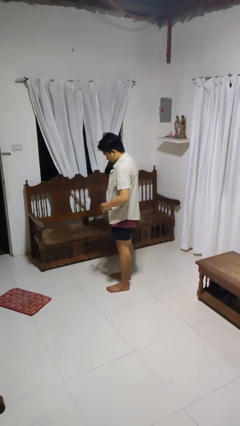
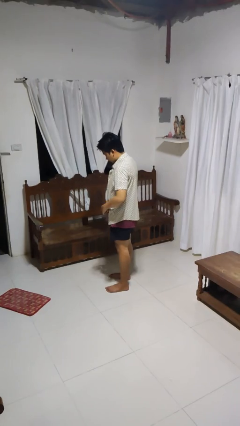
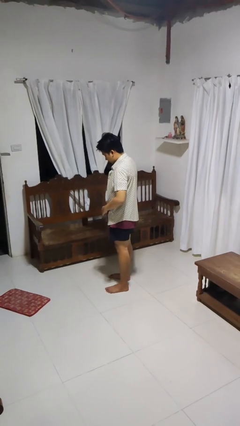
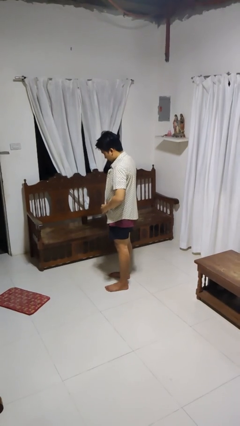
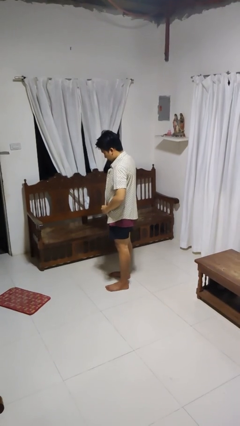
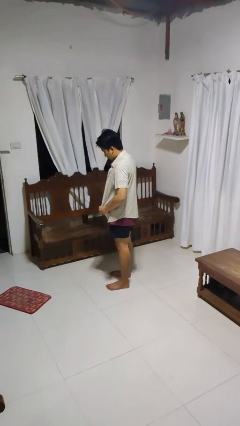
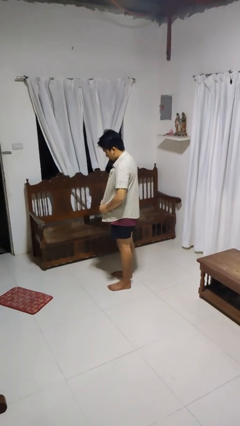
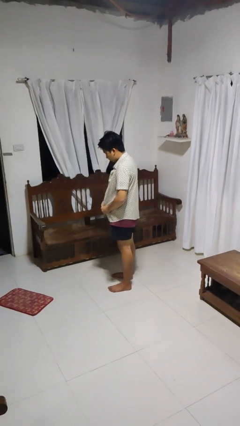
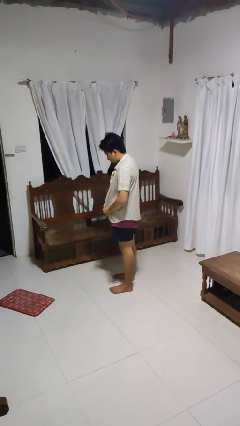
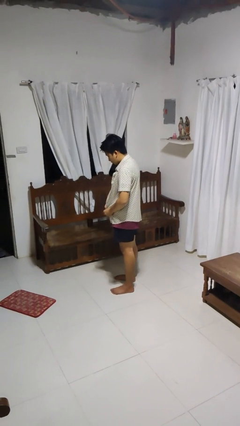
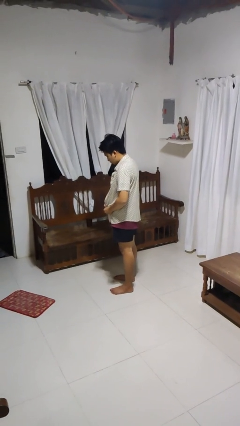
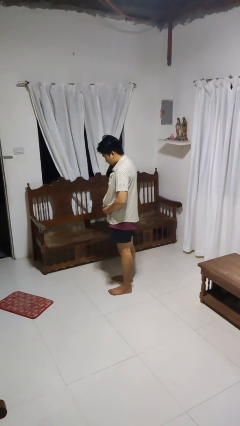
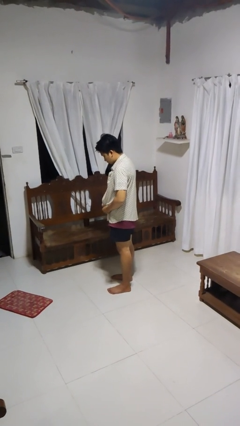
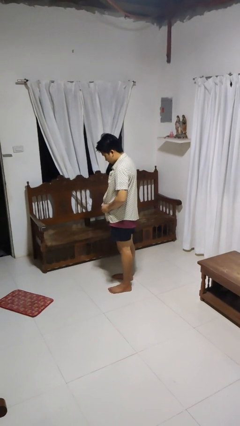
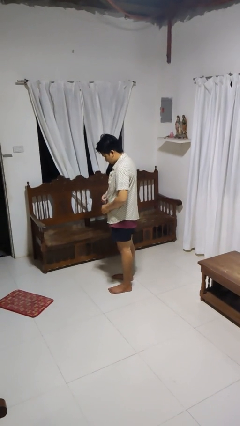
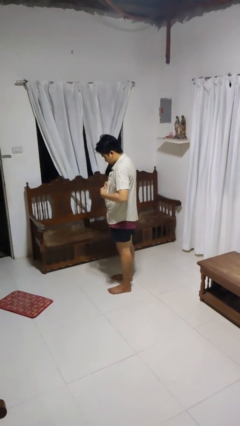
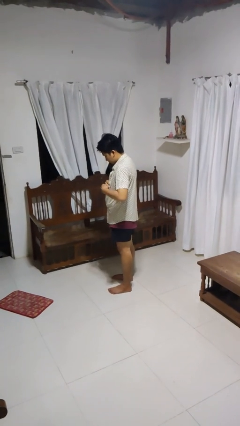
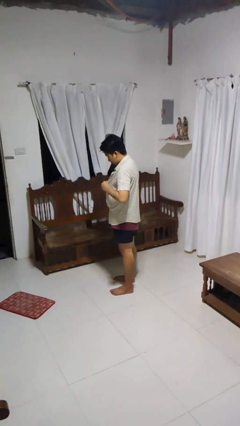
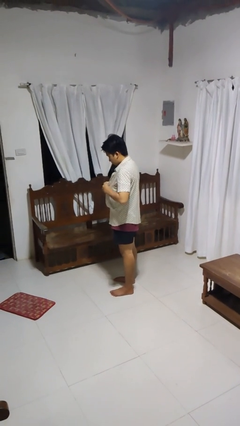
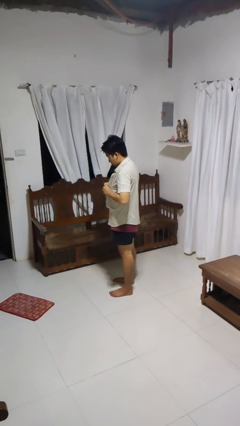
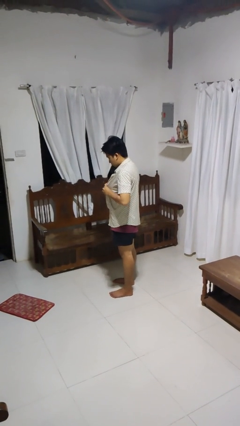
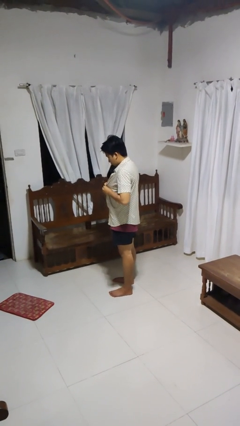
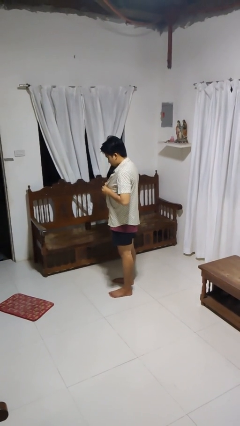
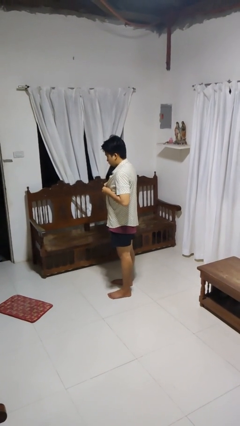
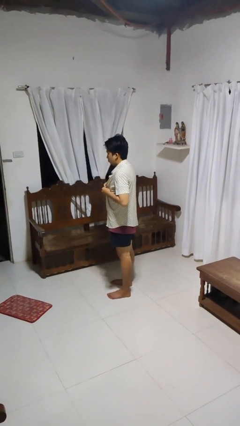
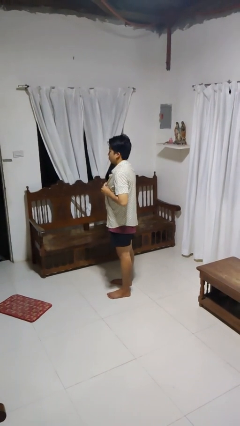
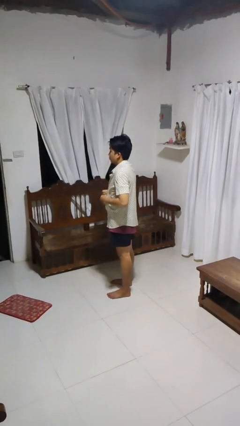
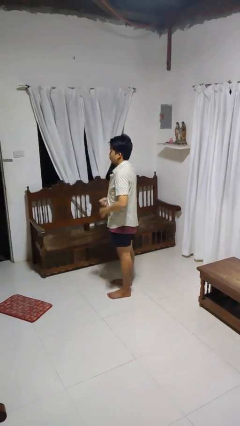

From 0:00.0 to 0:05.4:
person buttons shirt

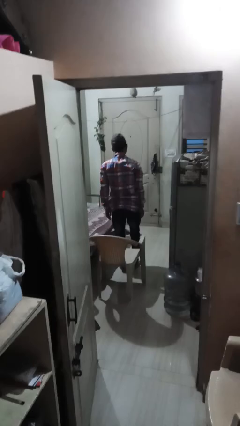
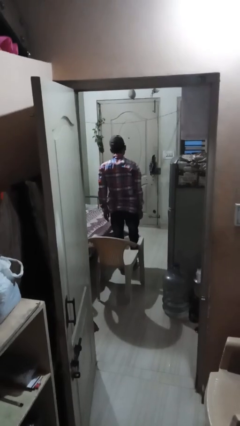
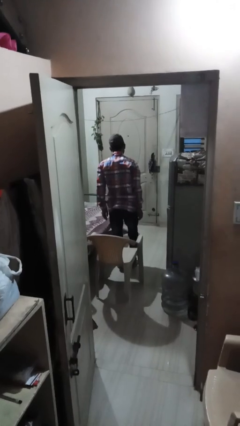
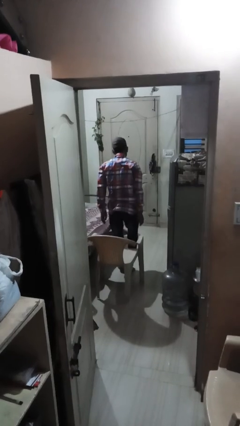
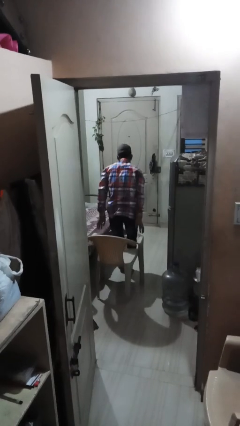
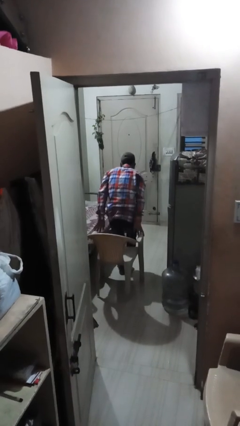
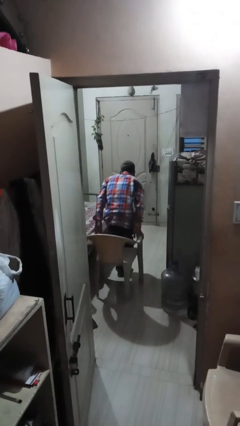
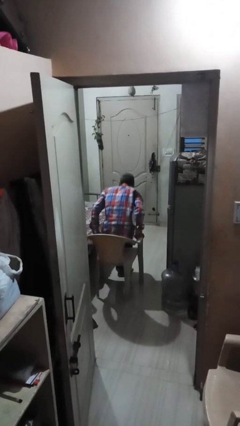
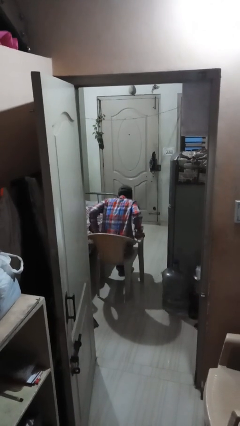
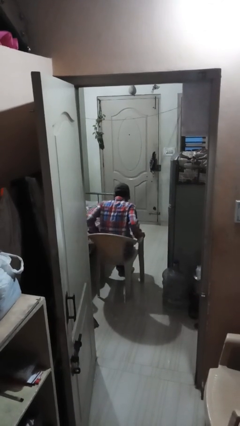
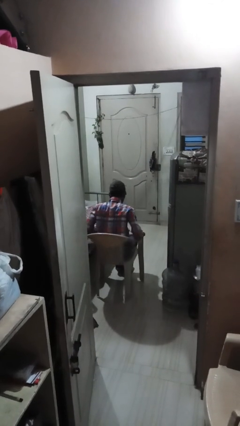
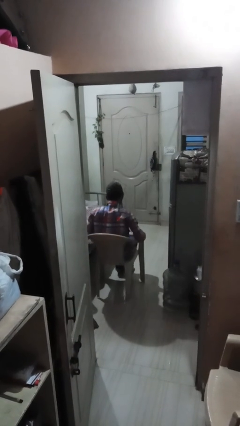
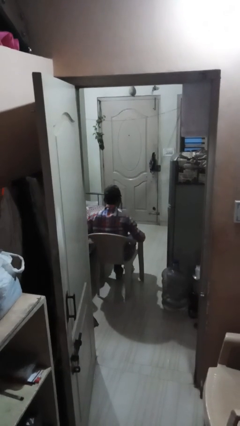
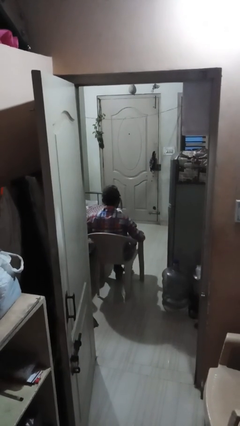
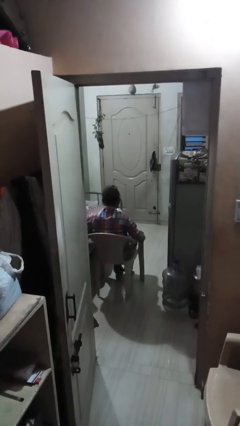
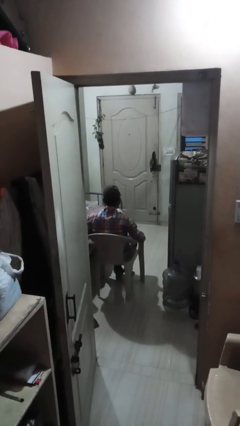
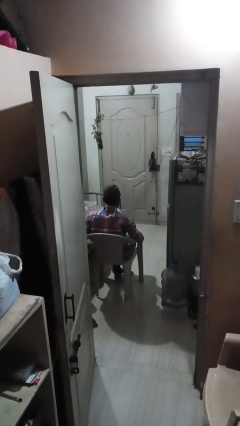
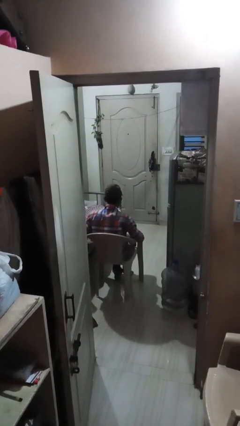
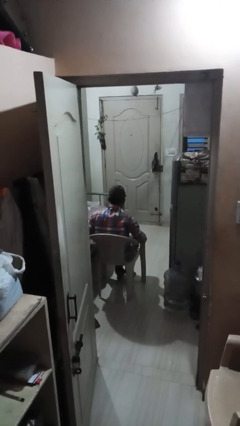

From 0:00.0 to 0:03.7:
person sits down

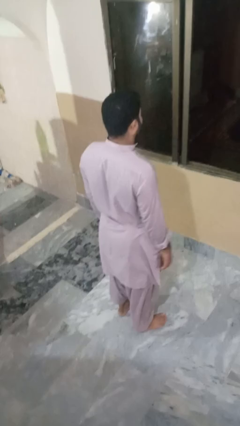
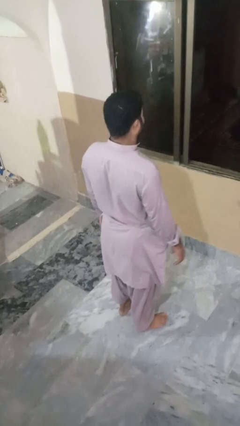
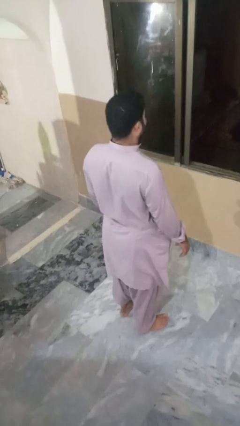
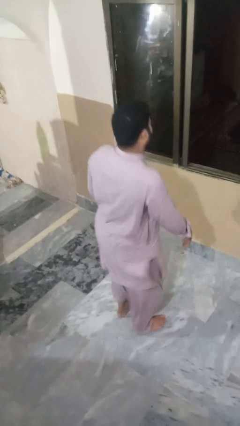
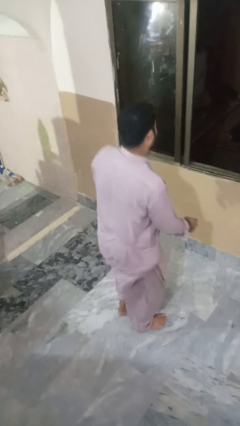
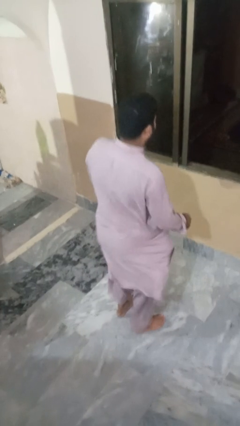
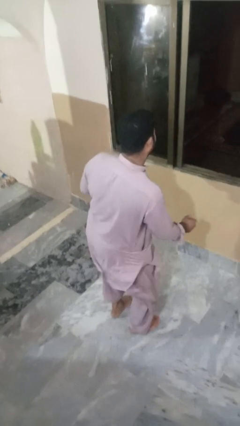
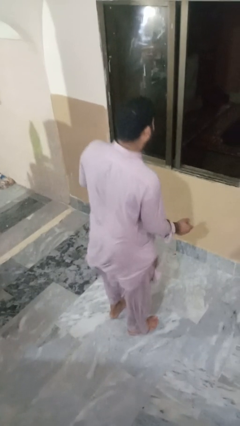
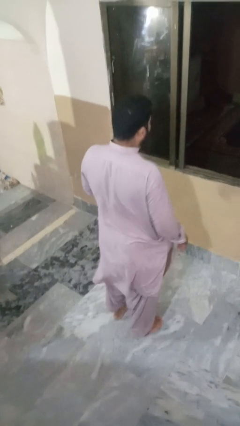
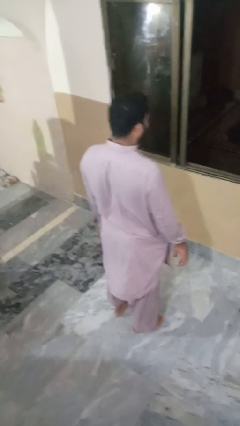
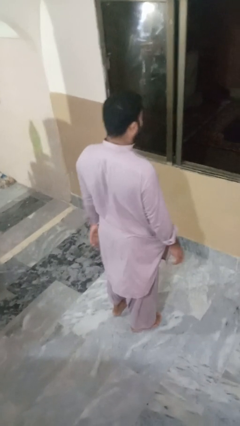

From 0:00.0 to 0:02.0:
person wiggles hips

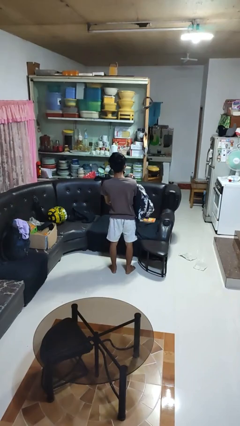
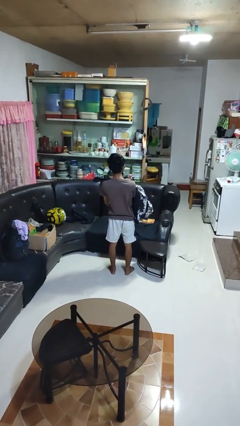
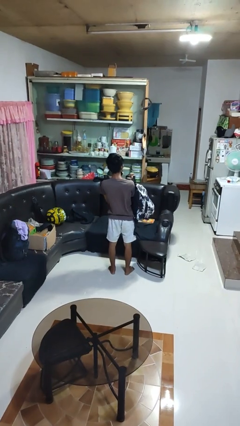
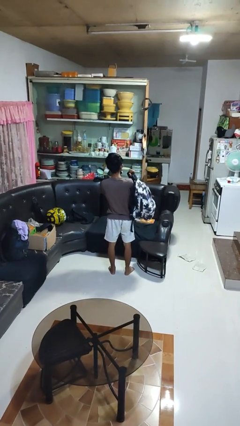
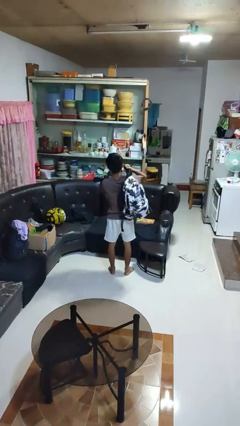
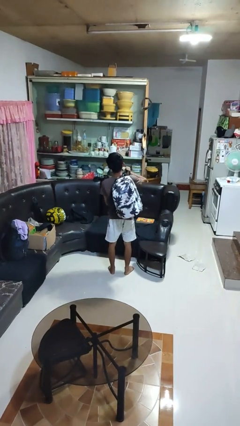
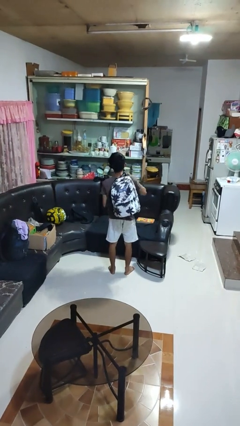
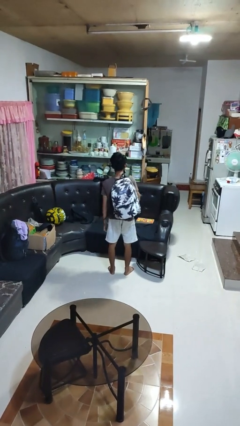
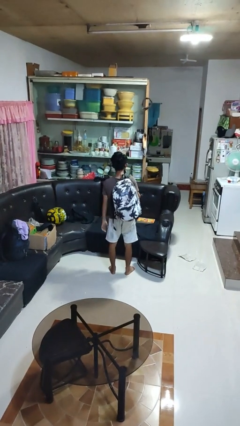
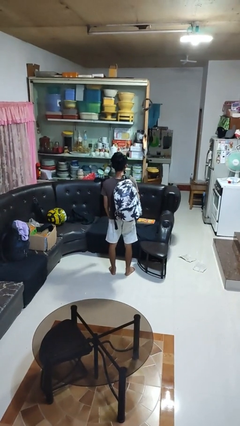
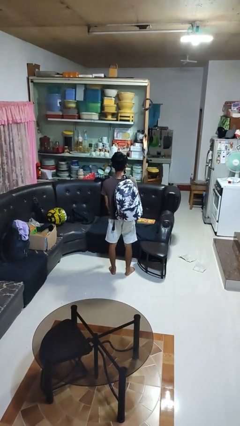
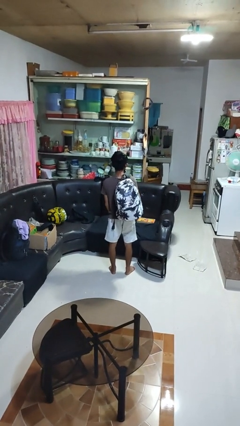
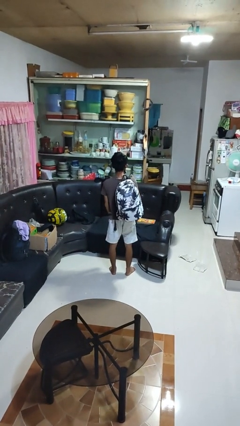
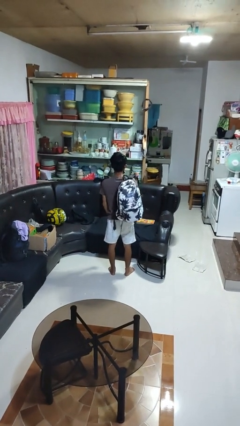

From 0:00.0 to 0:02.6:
person puts on backpack

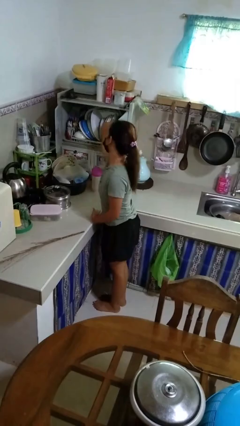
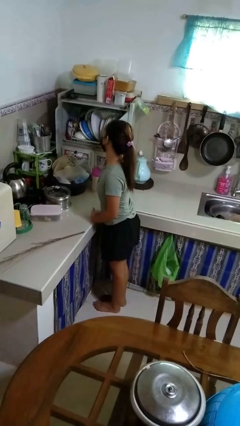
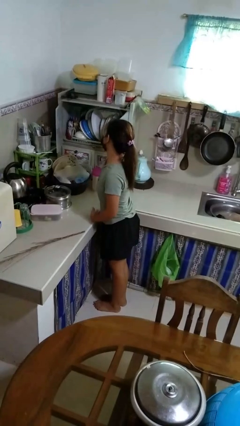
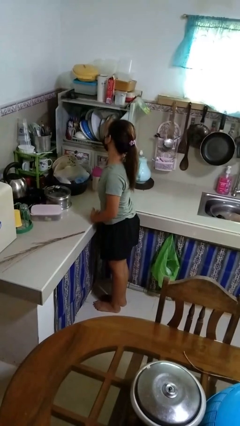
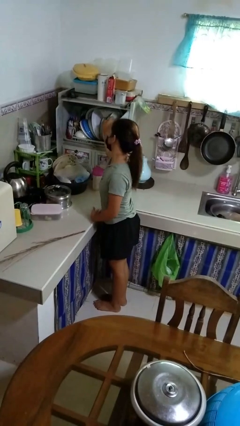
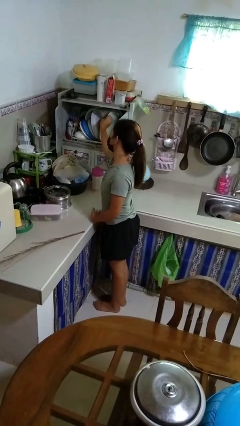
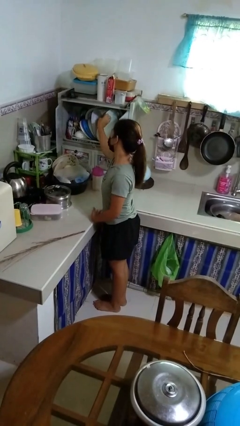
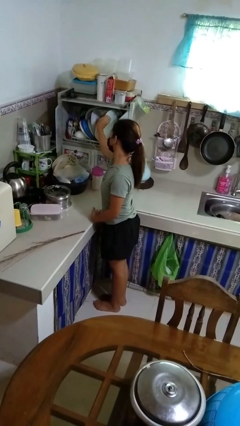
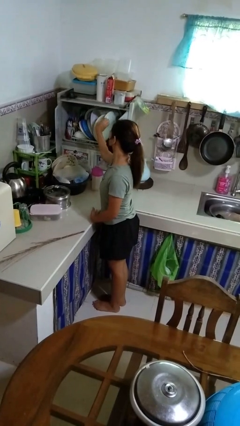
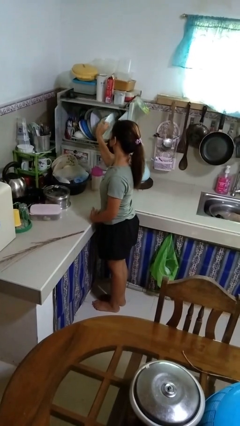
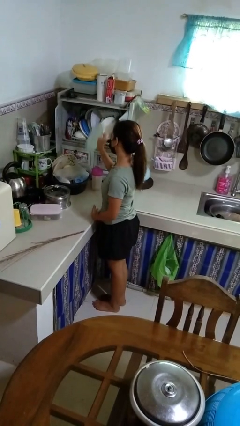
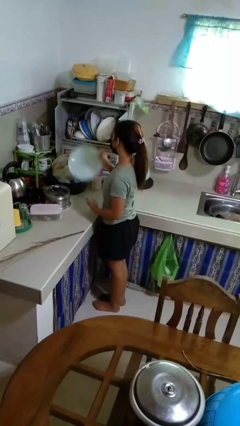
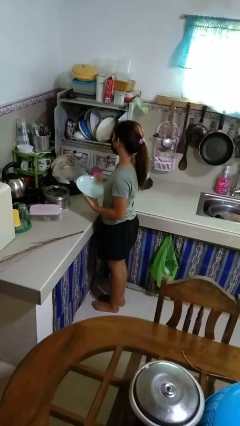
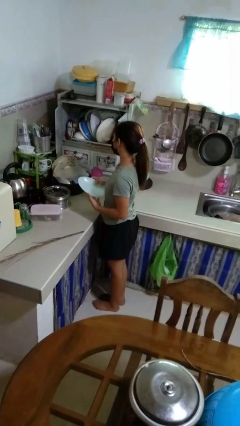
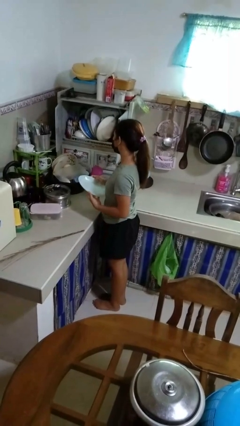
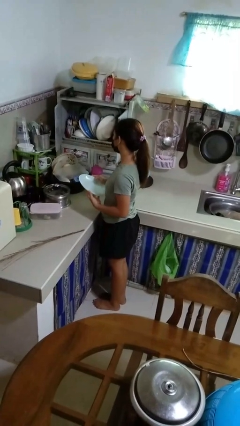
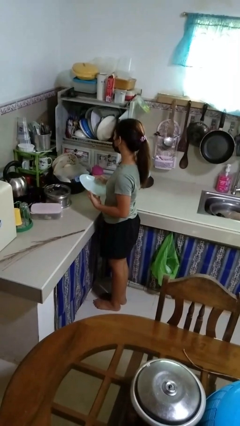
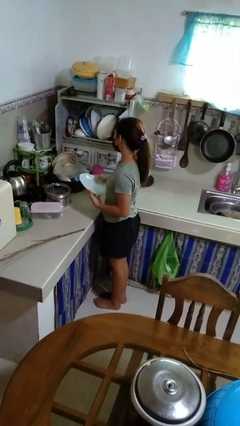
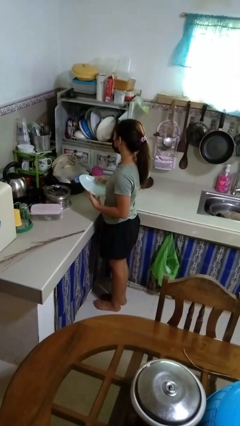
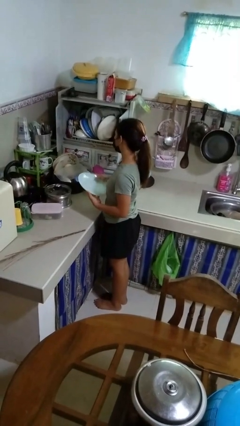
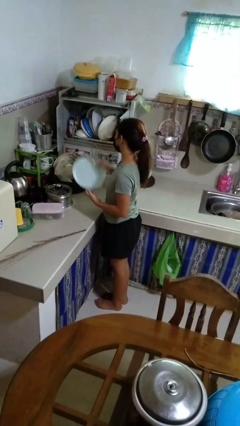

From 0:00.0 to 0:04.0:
person takes object from kitchen drawer

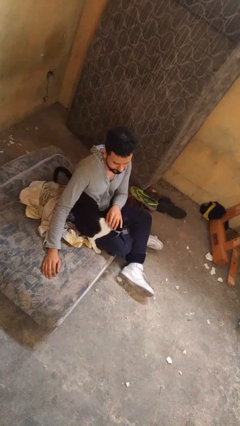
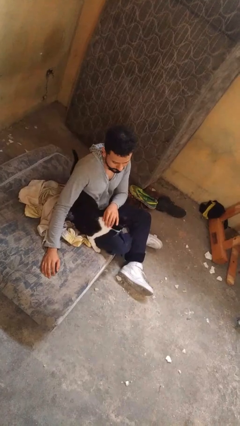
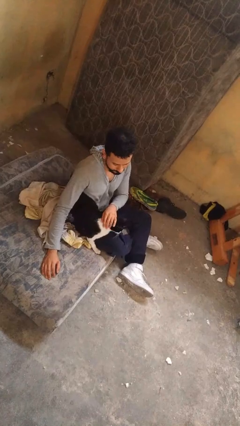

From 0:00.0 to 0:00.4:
person hugs cat
